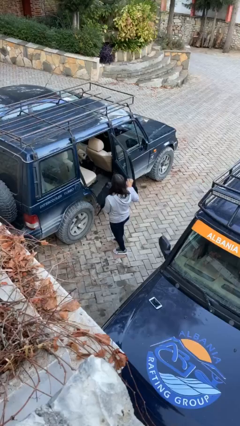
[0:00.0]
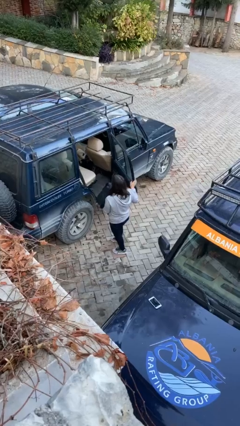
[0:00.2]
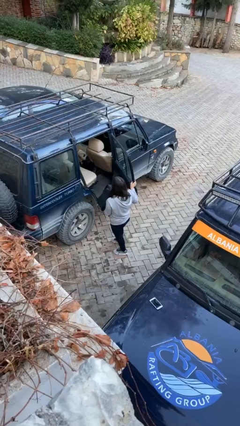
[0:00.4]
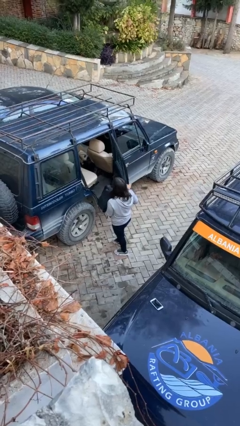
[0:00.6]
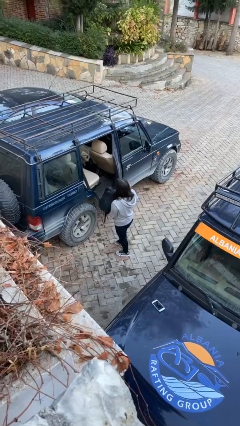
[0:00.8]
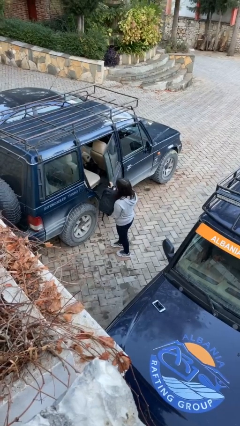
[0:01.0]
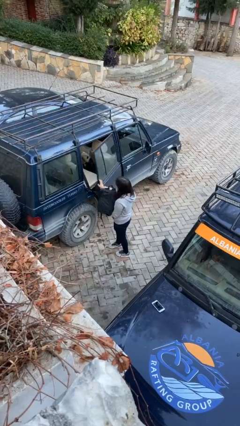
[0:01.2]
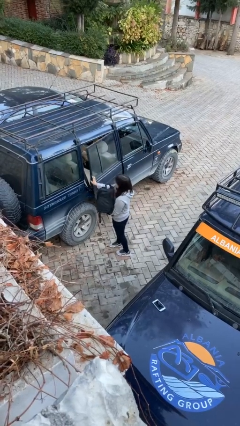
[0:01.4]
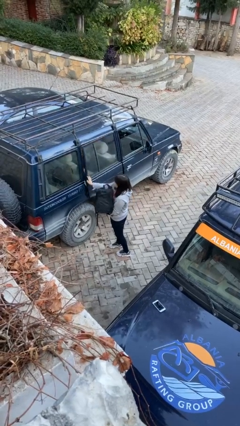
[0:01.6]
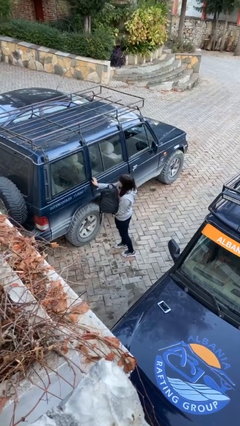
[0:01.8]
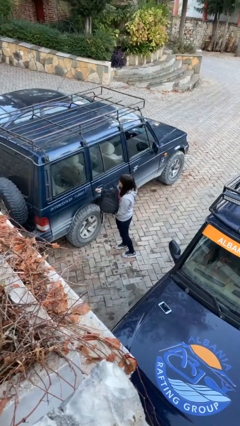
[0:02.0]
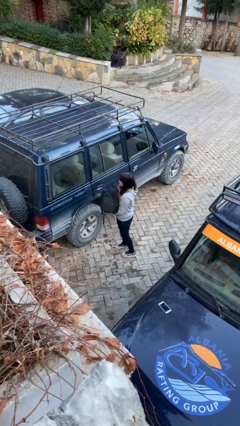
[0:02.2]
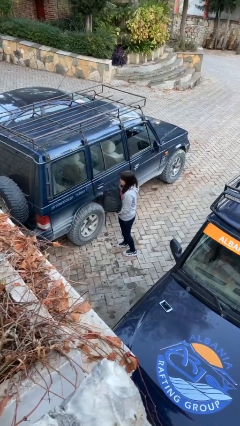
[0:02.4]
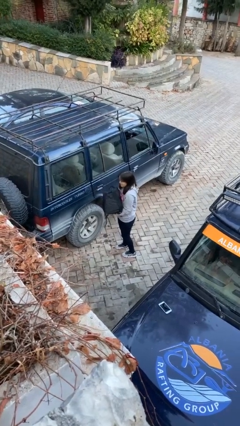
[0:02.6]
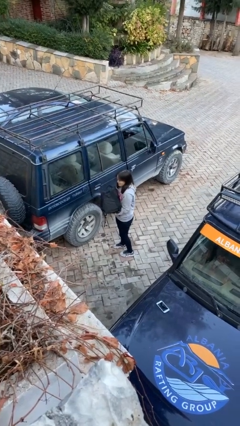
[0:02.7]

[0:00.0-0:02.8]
person closes car door

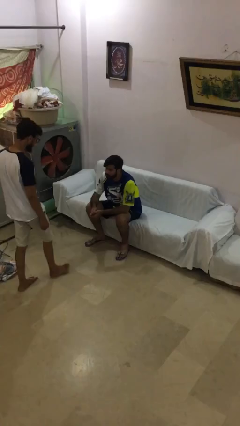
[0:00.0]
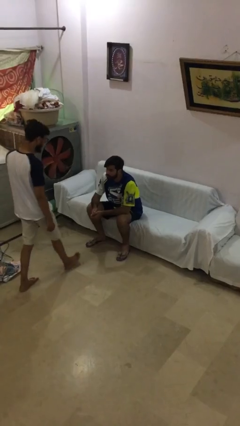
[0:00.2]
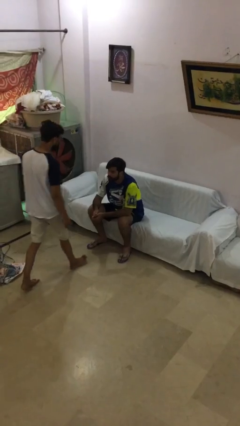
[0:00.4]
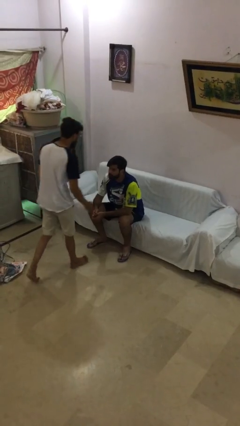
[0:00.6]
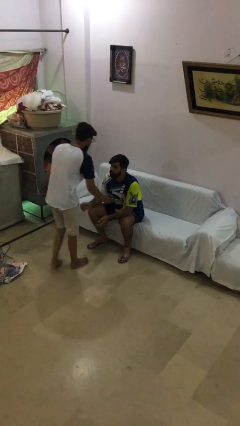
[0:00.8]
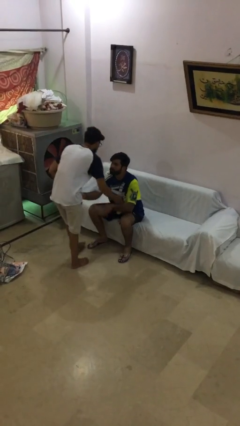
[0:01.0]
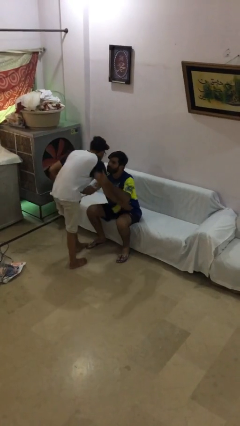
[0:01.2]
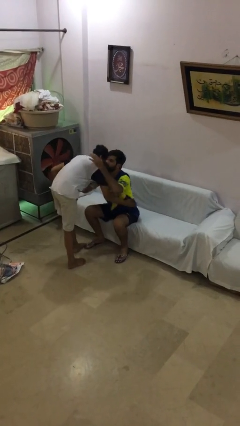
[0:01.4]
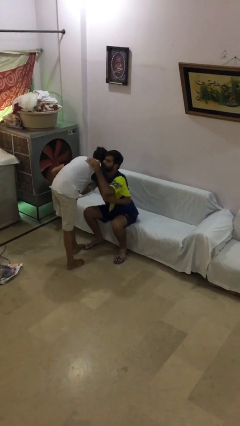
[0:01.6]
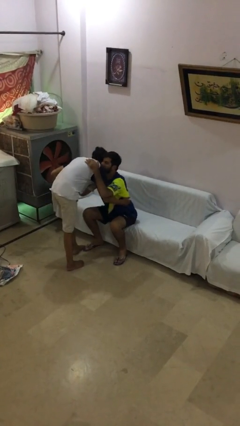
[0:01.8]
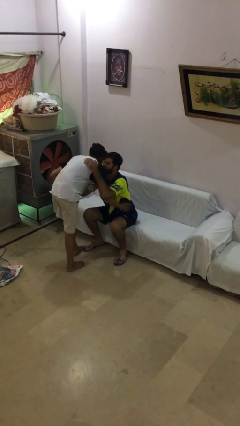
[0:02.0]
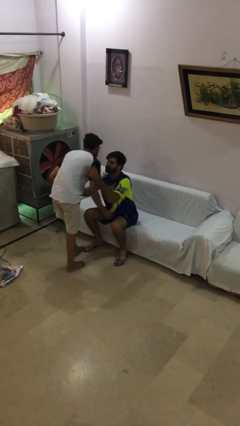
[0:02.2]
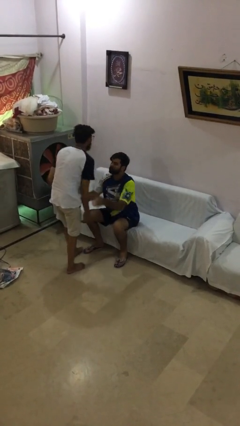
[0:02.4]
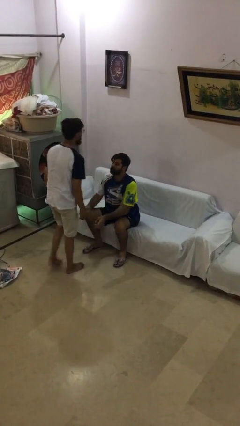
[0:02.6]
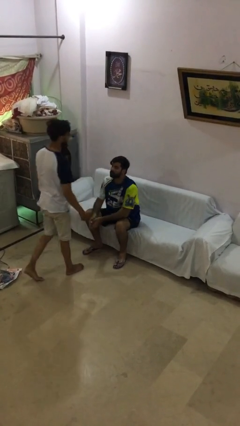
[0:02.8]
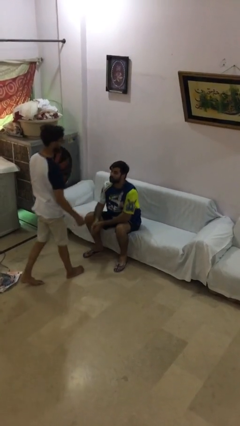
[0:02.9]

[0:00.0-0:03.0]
person embraces person

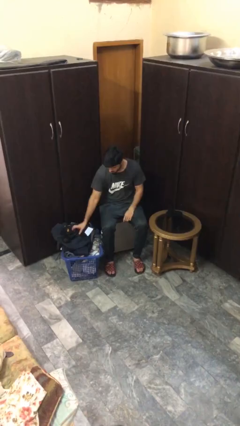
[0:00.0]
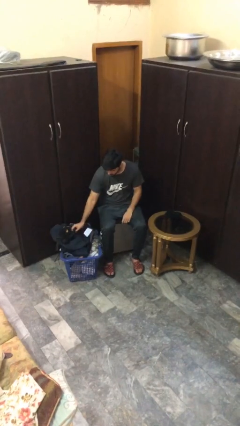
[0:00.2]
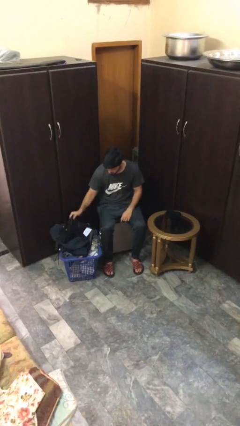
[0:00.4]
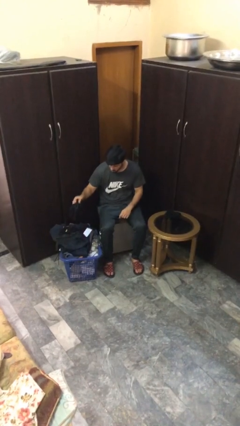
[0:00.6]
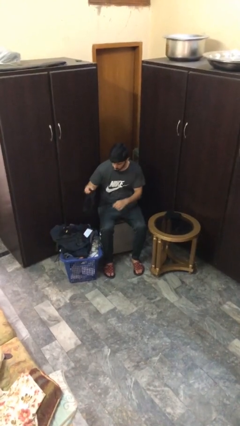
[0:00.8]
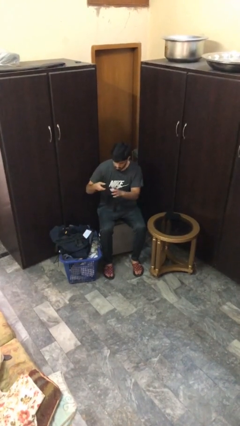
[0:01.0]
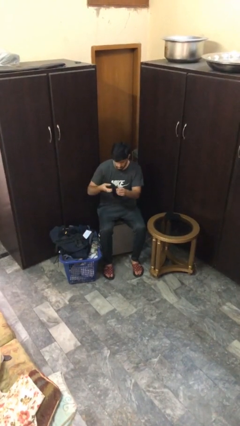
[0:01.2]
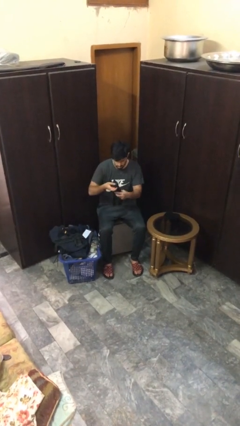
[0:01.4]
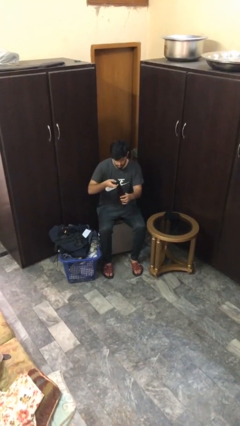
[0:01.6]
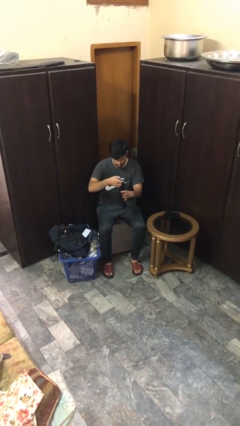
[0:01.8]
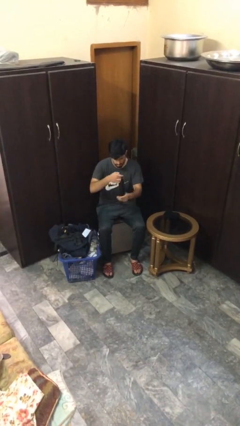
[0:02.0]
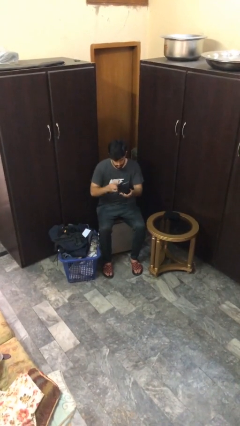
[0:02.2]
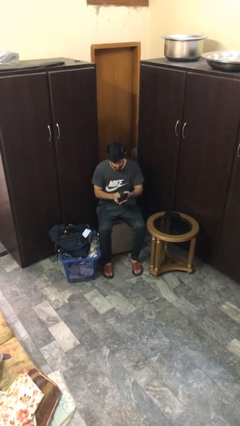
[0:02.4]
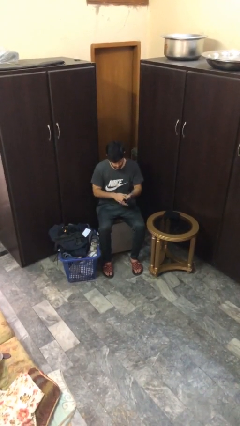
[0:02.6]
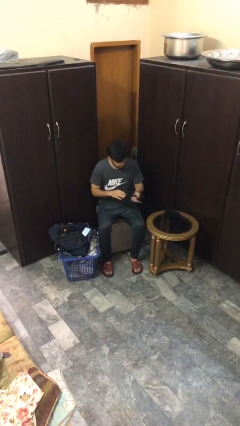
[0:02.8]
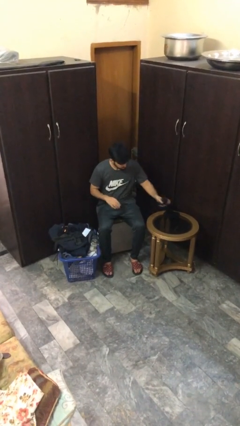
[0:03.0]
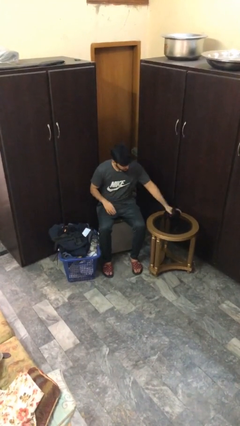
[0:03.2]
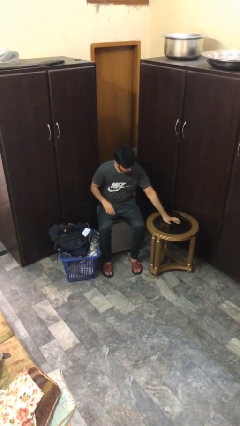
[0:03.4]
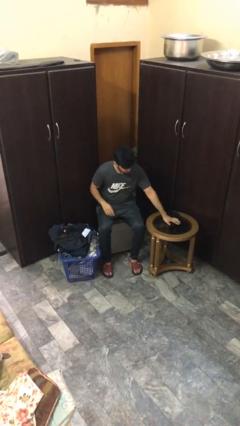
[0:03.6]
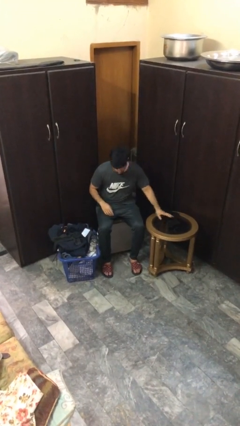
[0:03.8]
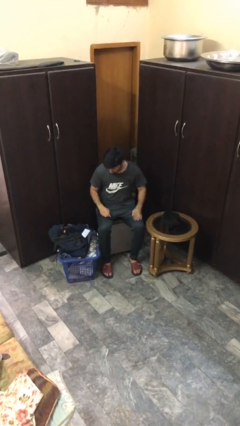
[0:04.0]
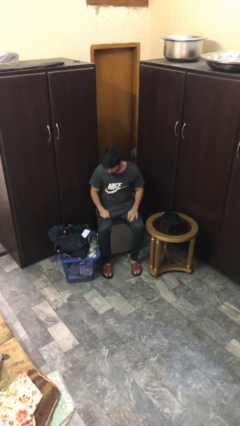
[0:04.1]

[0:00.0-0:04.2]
person folds socks

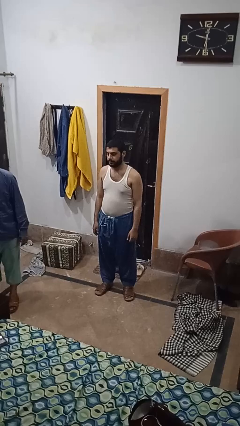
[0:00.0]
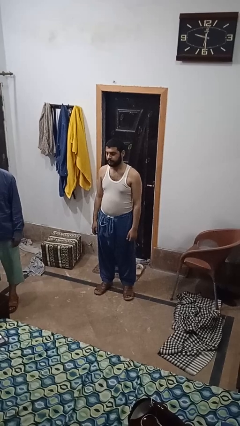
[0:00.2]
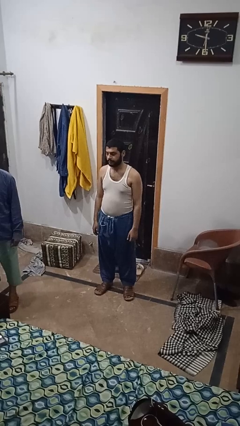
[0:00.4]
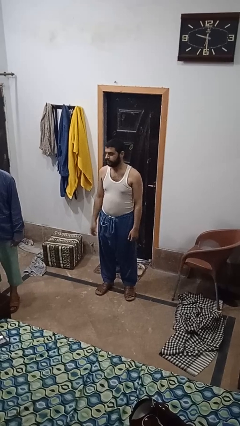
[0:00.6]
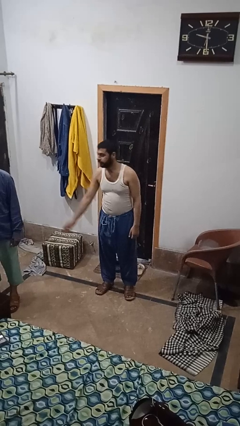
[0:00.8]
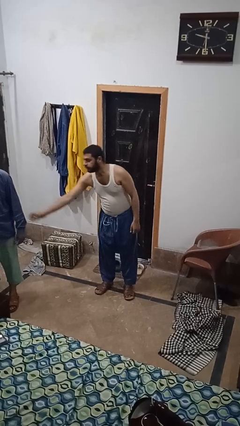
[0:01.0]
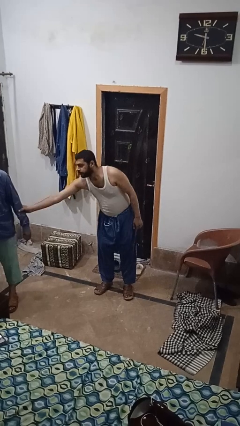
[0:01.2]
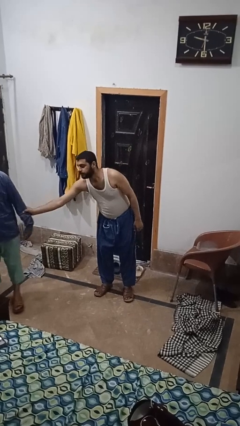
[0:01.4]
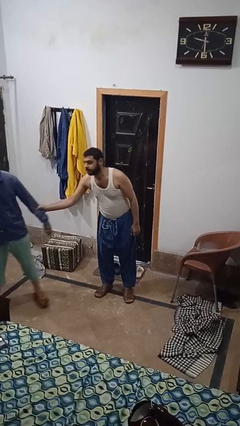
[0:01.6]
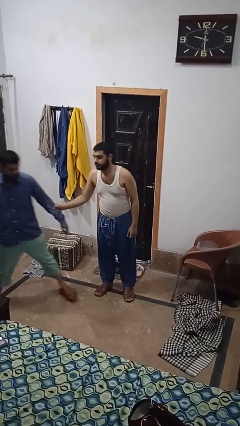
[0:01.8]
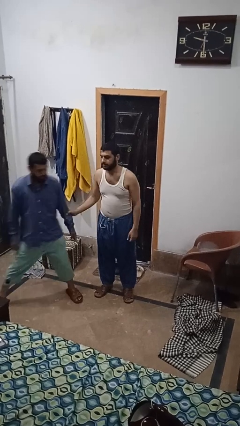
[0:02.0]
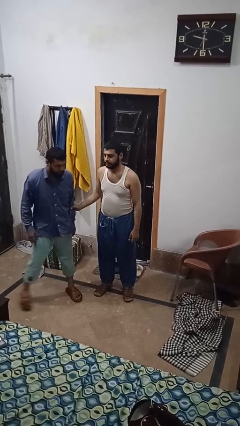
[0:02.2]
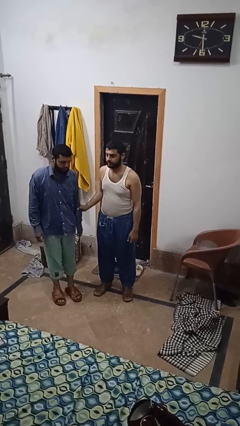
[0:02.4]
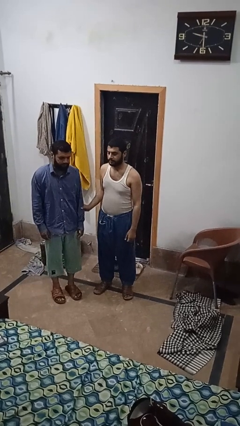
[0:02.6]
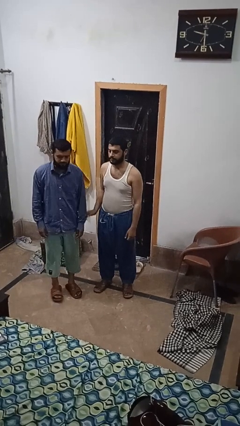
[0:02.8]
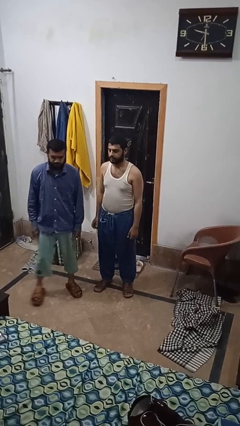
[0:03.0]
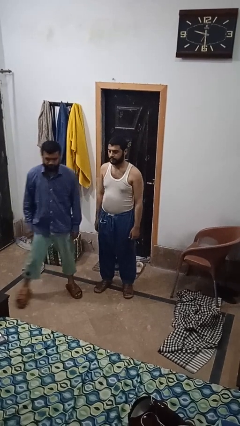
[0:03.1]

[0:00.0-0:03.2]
person grabs person by forearm

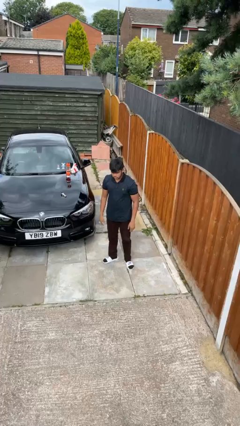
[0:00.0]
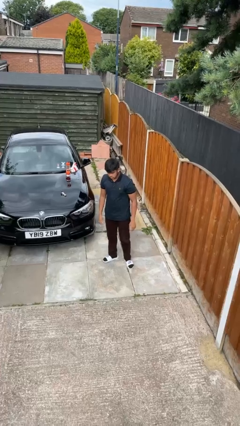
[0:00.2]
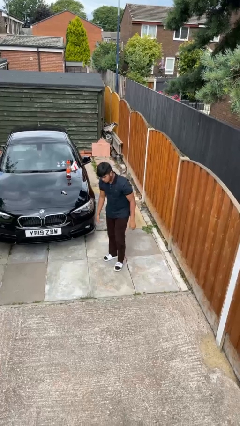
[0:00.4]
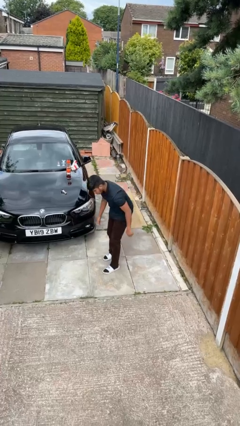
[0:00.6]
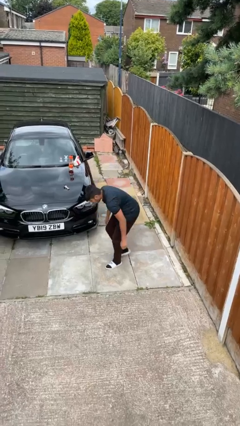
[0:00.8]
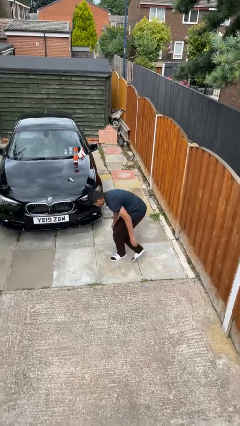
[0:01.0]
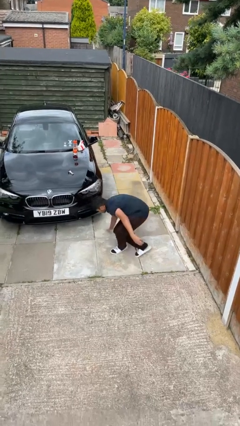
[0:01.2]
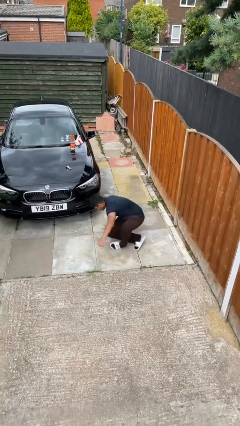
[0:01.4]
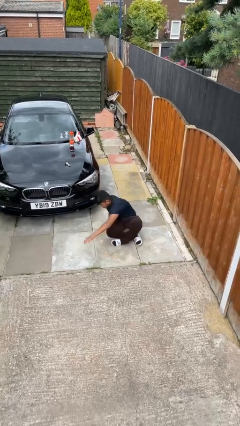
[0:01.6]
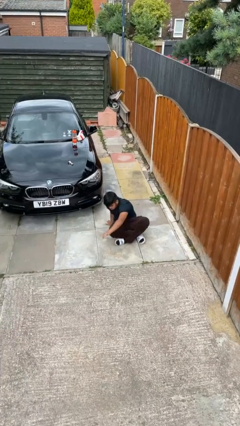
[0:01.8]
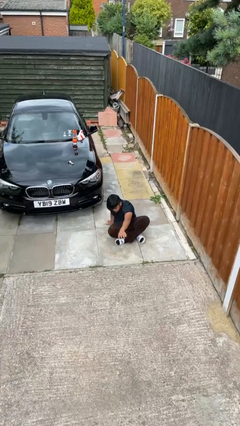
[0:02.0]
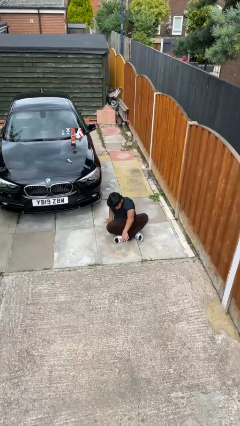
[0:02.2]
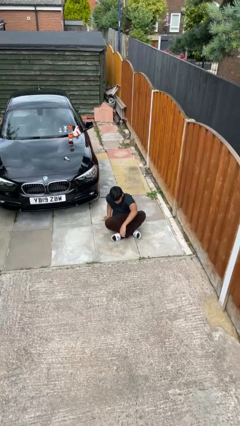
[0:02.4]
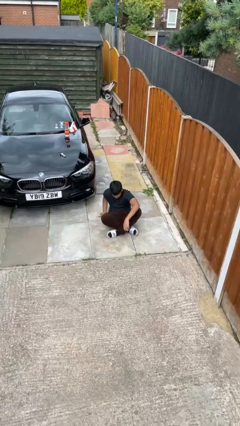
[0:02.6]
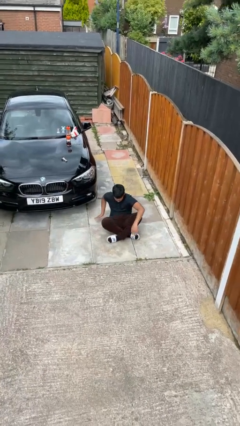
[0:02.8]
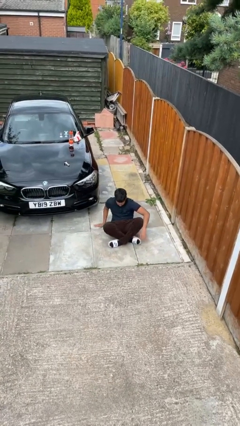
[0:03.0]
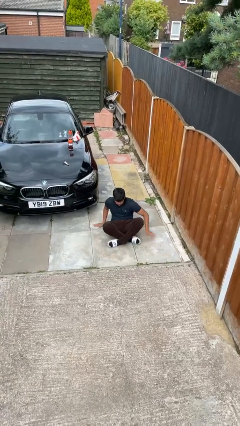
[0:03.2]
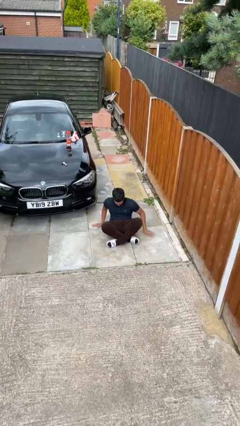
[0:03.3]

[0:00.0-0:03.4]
person sits crisscross

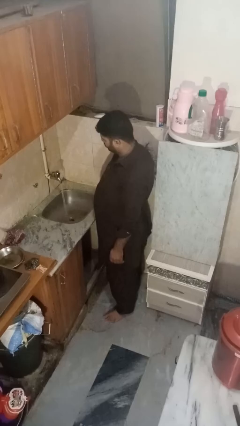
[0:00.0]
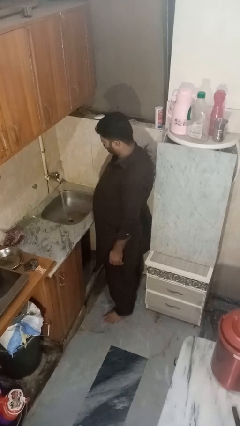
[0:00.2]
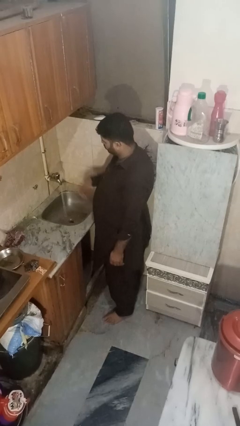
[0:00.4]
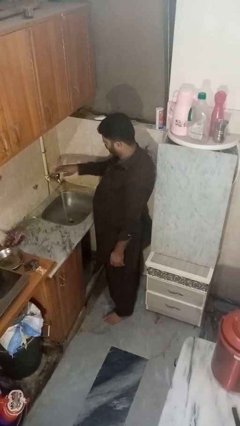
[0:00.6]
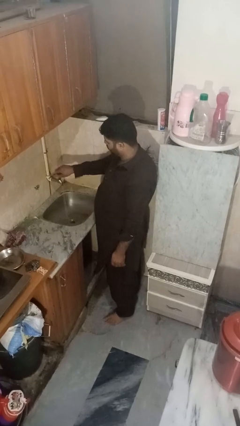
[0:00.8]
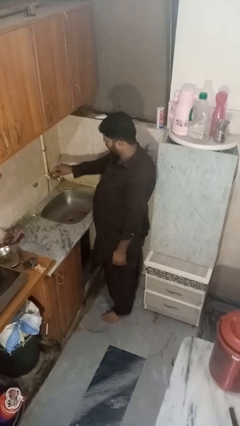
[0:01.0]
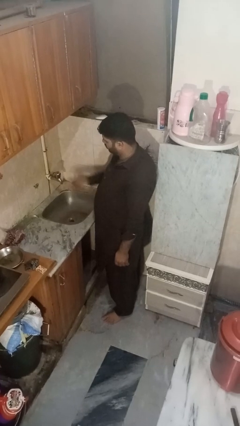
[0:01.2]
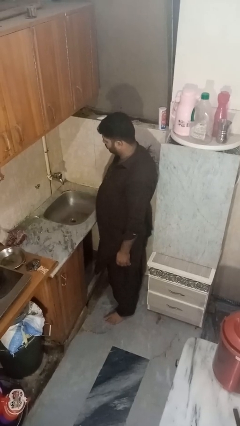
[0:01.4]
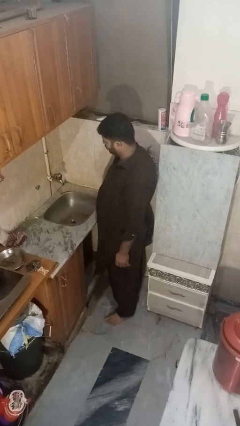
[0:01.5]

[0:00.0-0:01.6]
person turns off faucet
